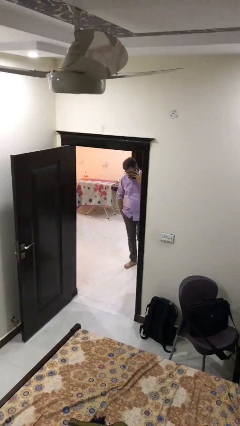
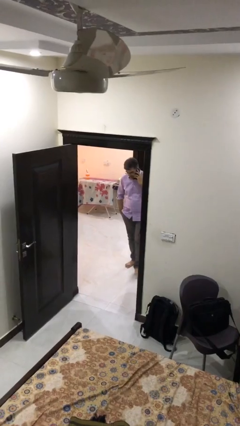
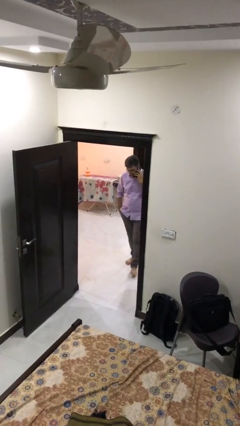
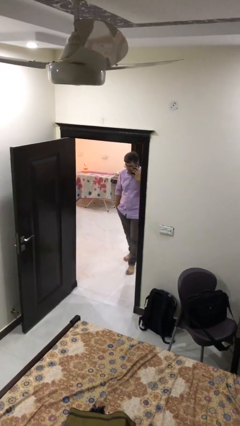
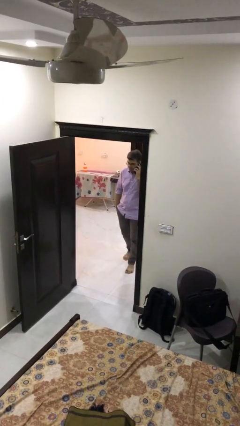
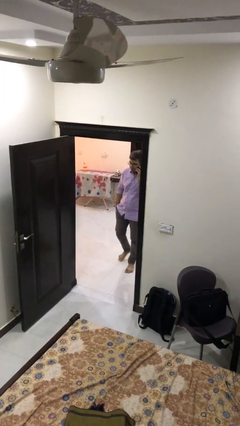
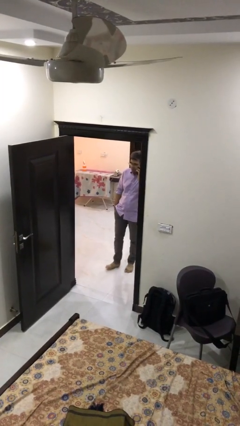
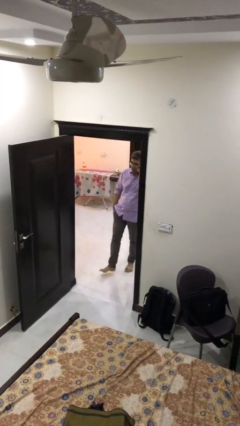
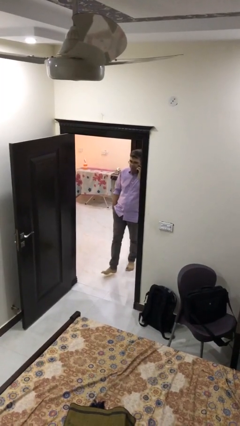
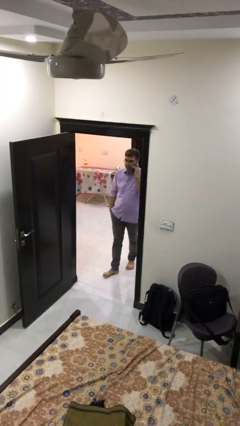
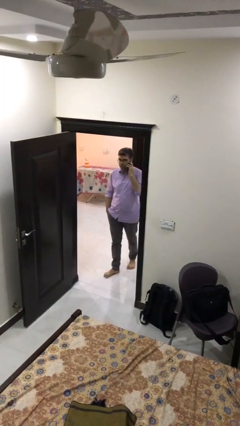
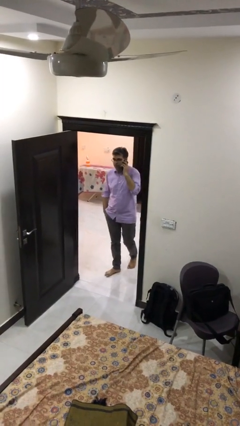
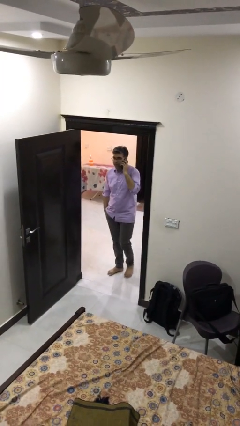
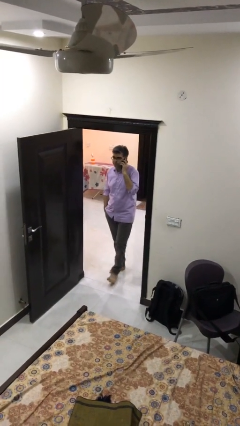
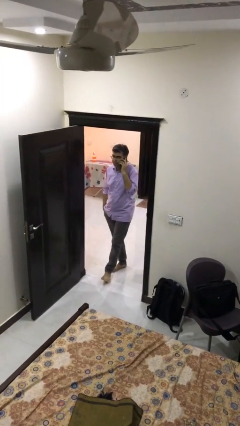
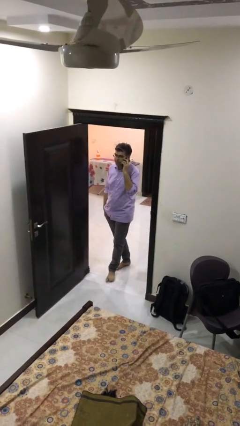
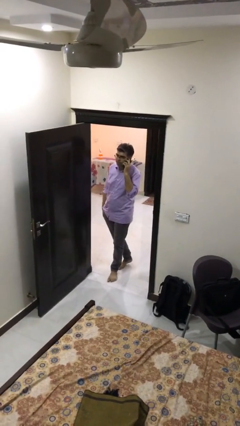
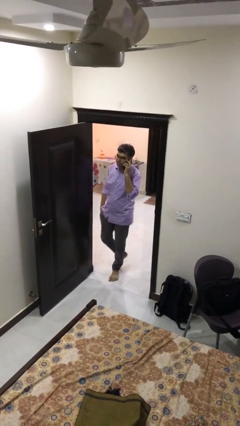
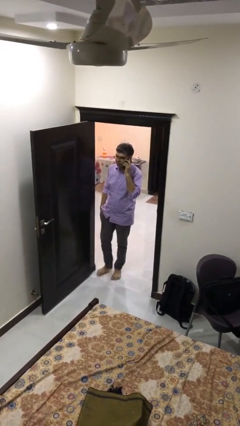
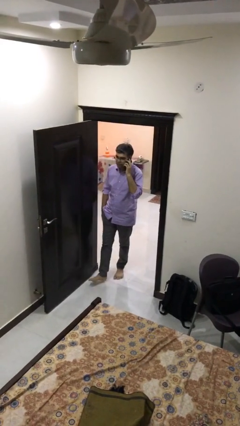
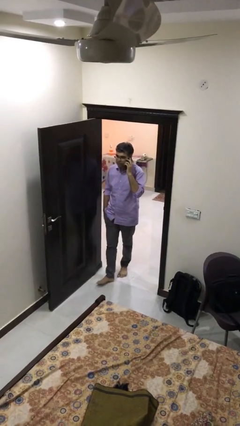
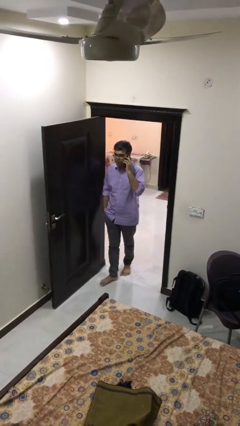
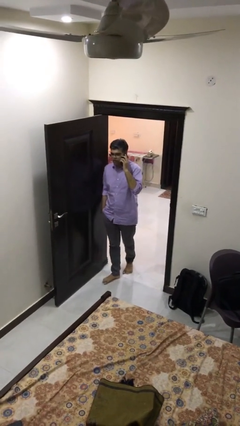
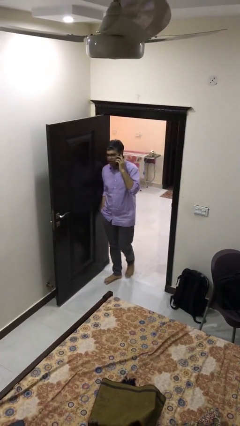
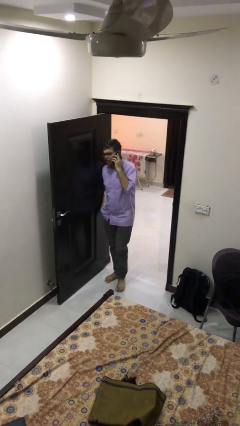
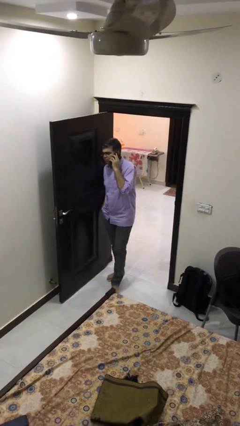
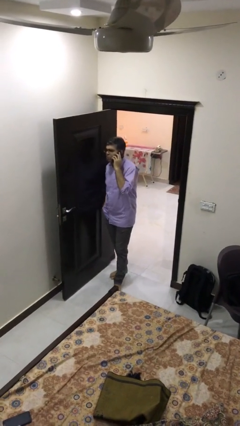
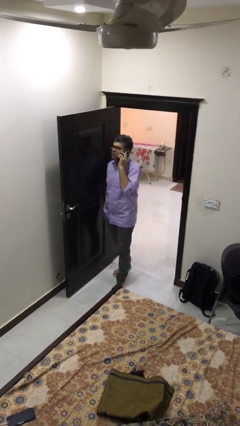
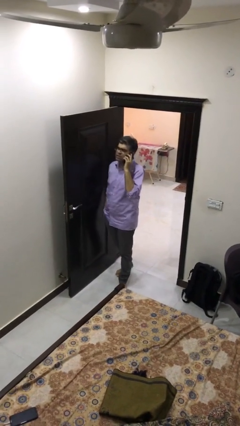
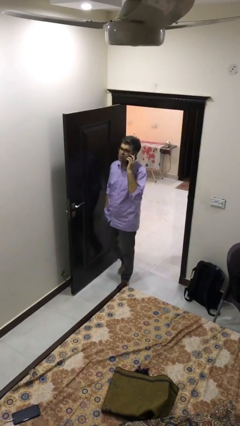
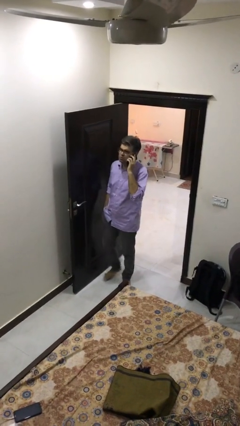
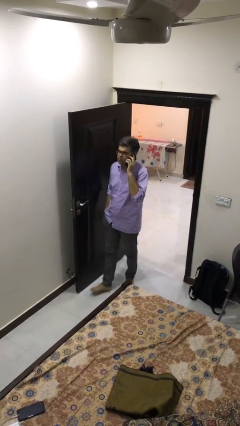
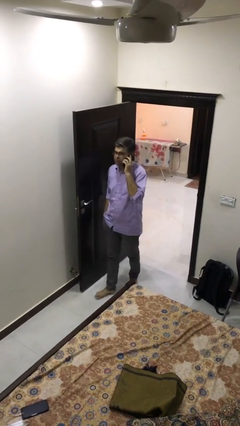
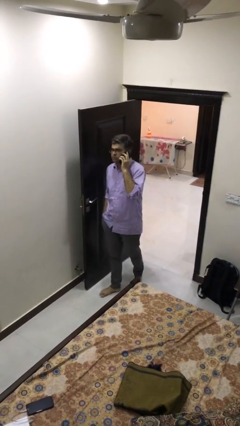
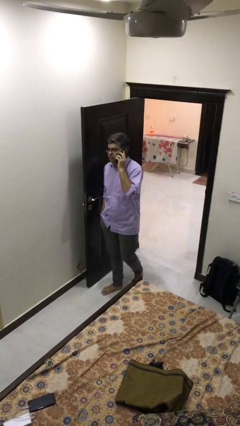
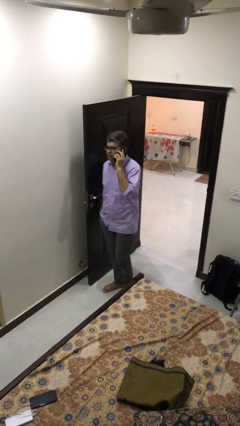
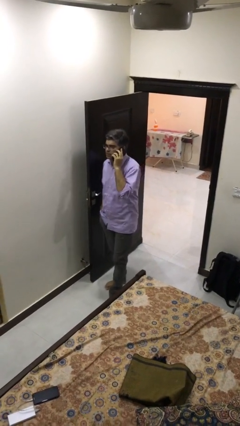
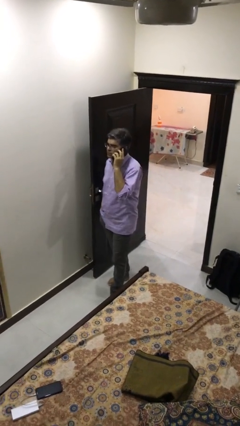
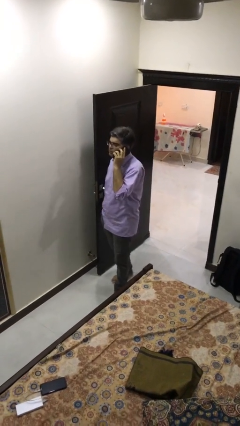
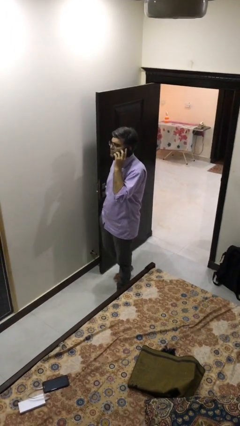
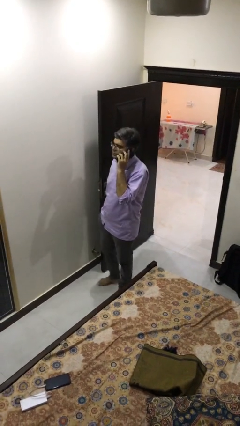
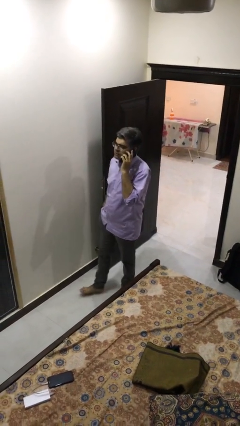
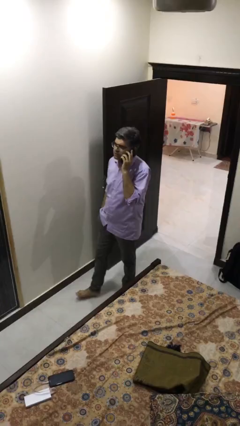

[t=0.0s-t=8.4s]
person enters scene through structure

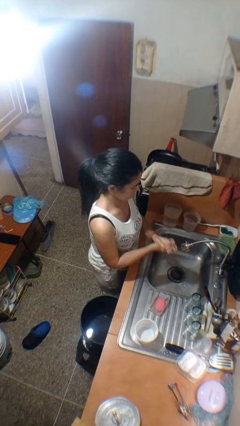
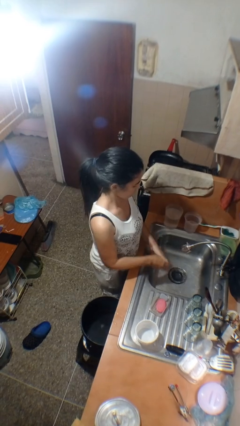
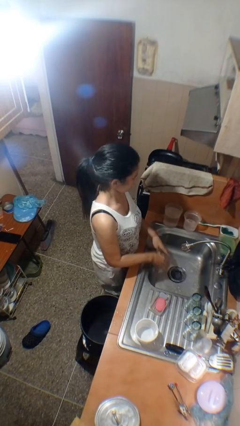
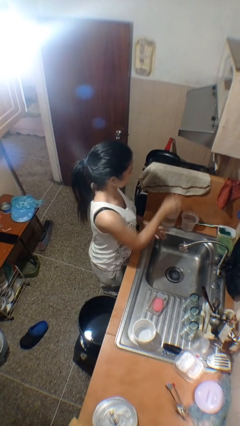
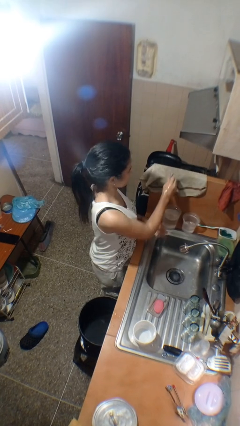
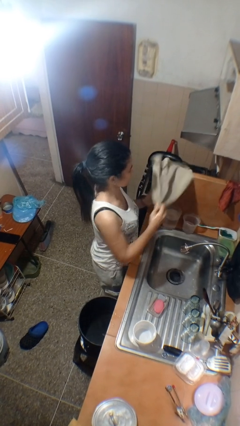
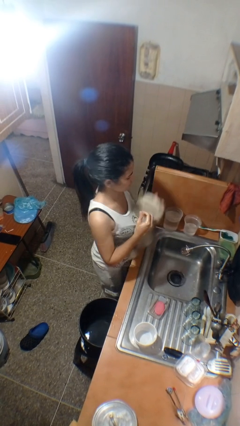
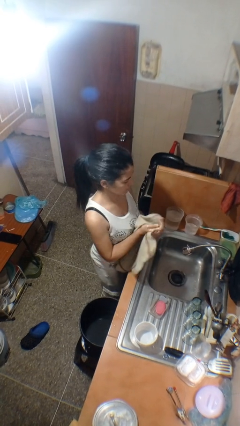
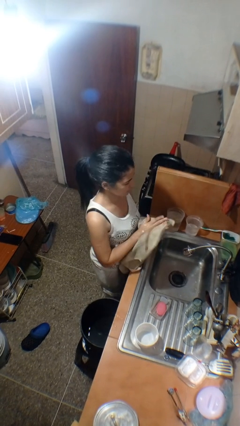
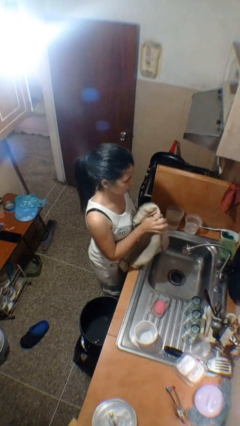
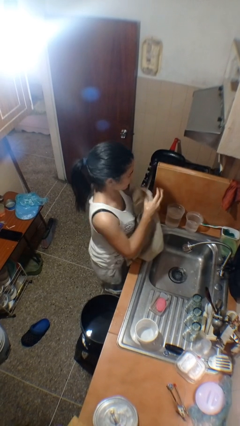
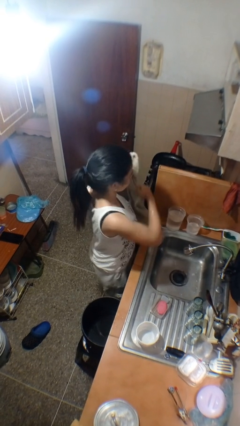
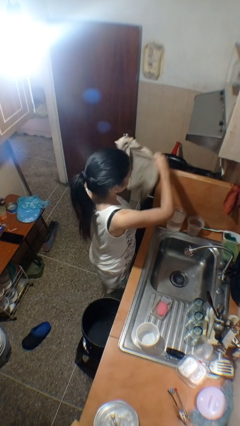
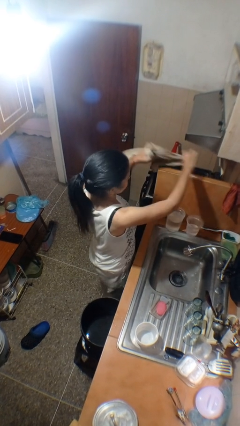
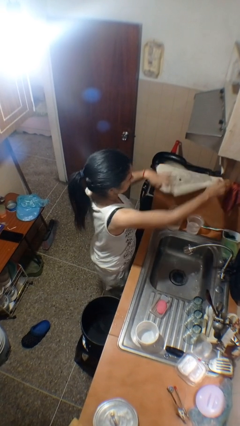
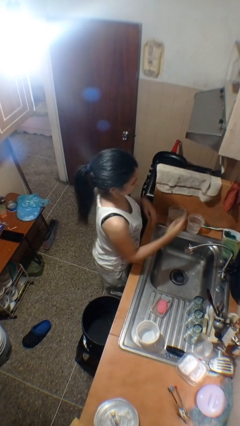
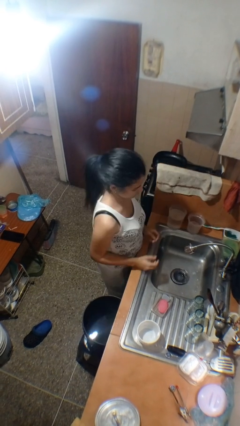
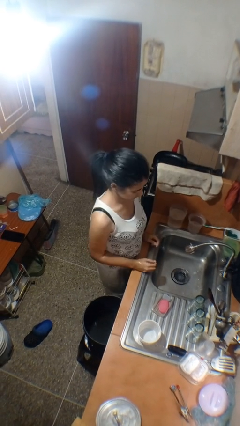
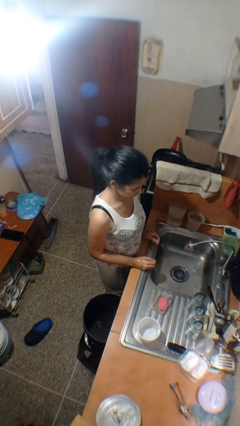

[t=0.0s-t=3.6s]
person dries hands with towel

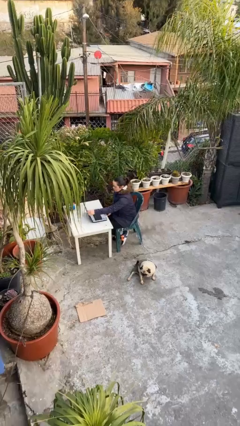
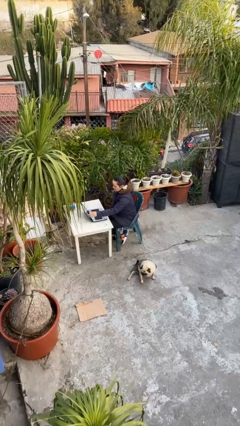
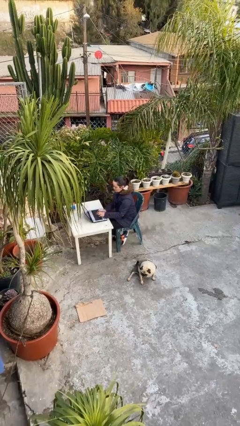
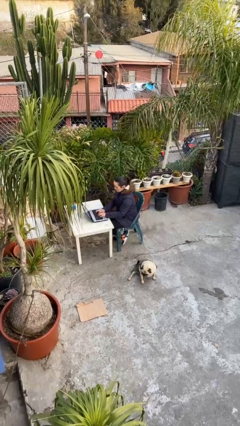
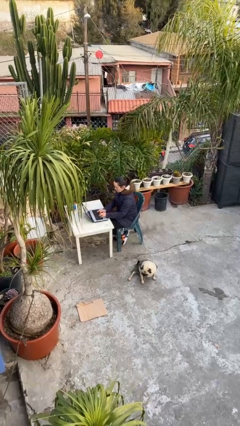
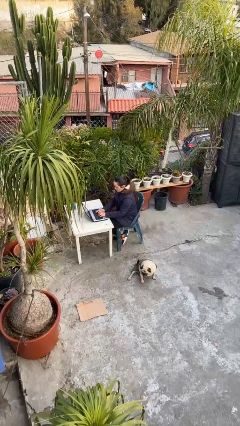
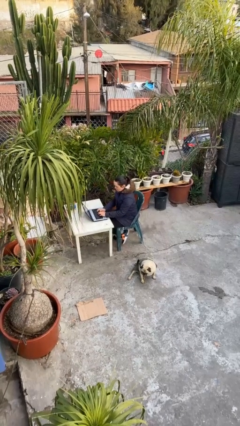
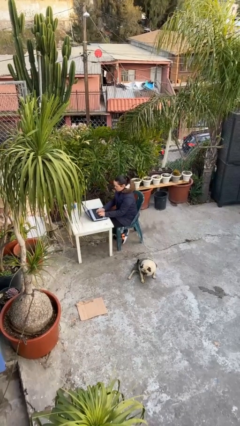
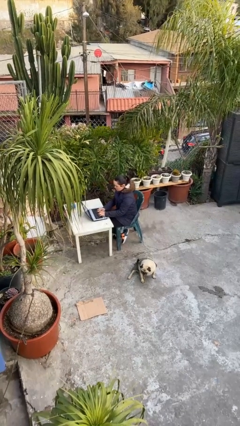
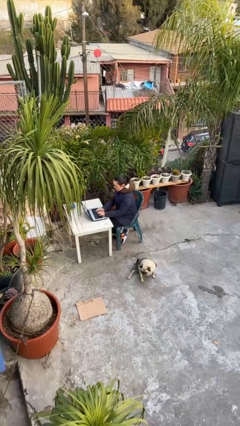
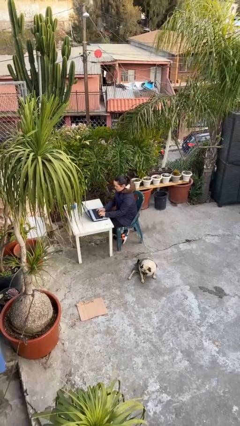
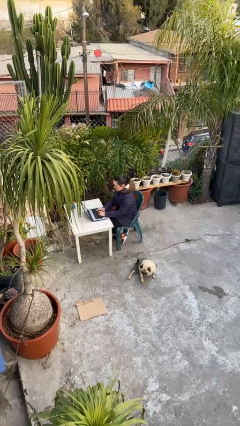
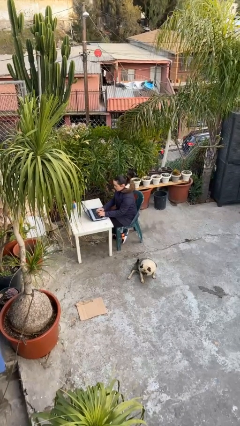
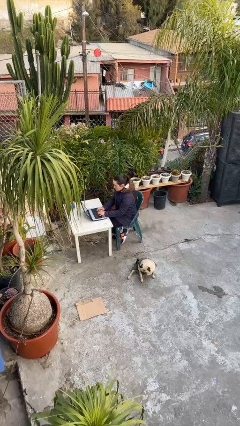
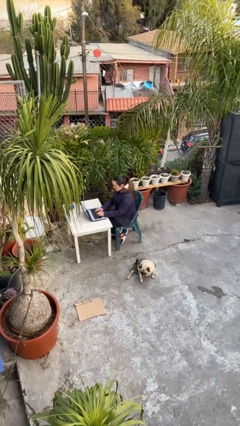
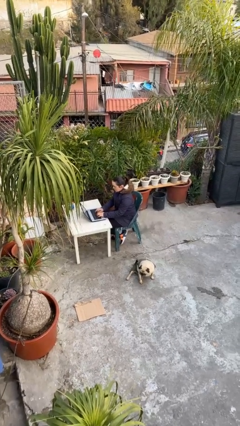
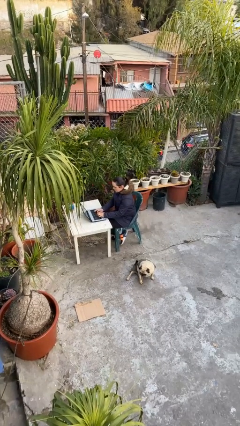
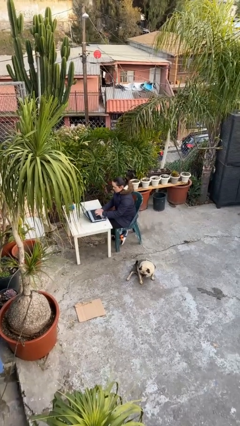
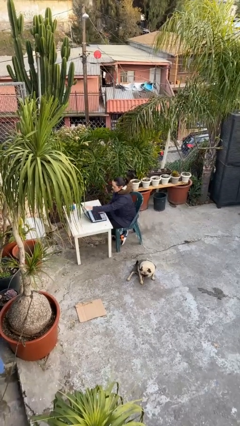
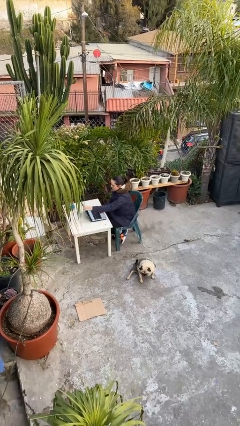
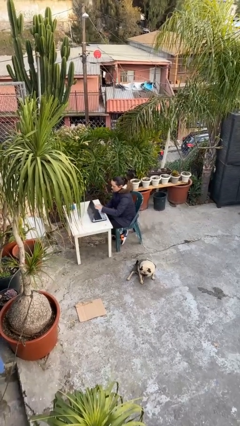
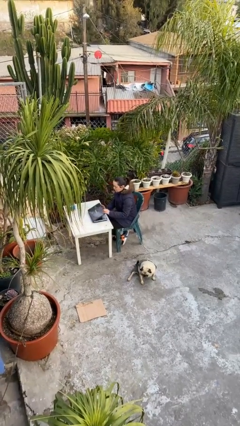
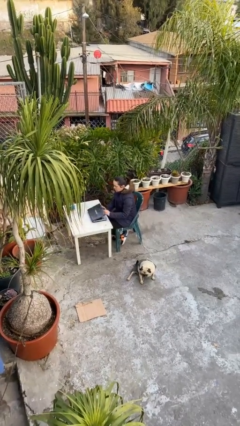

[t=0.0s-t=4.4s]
person interacts with laptop

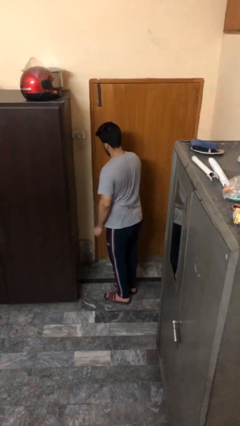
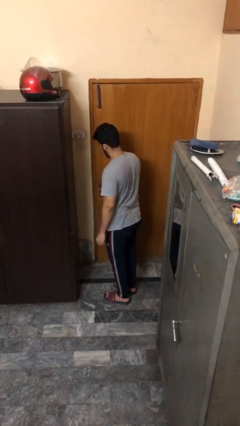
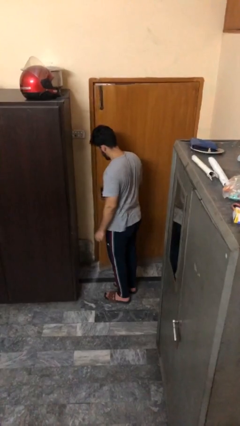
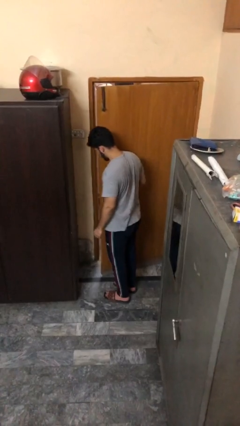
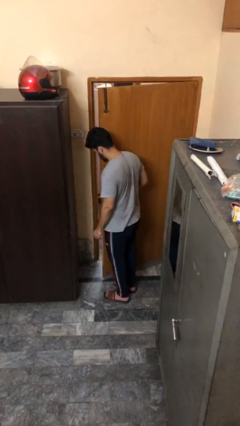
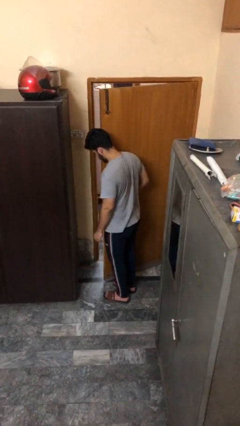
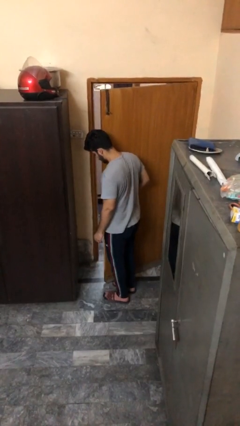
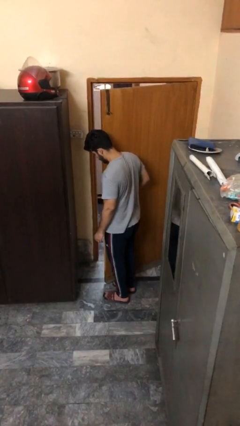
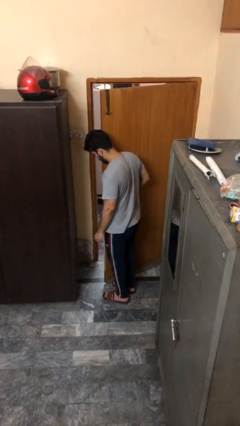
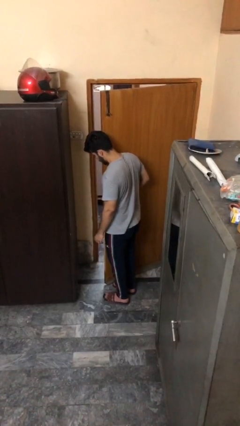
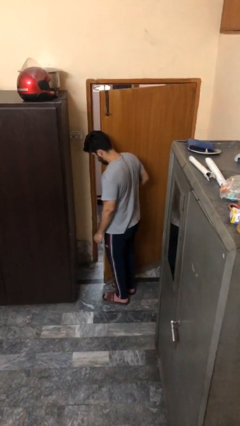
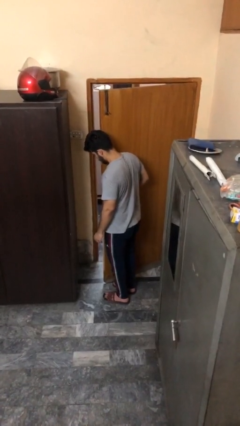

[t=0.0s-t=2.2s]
person opens facility door
